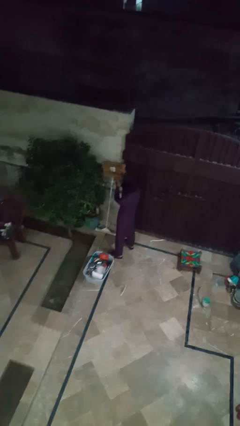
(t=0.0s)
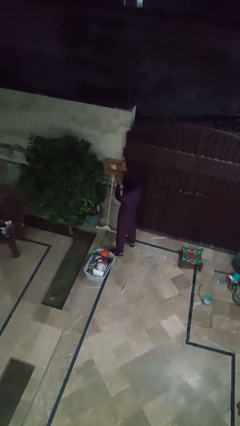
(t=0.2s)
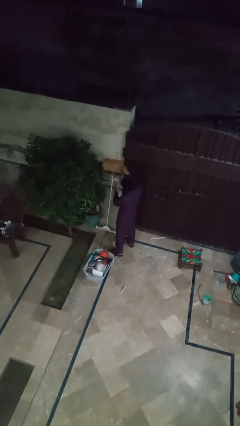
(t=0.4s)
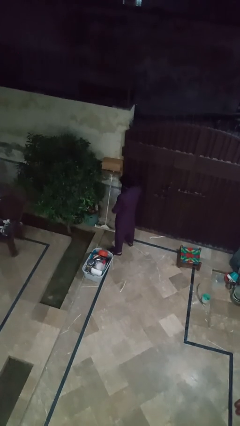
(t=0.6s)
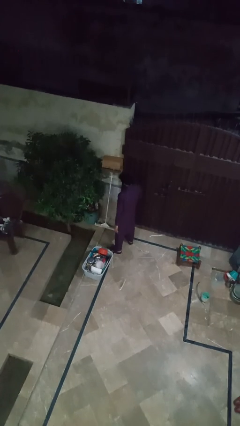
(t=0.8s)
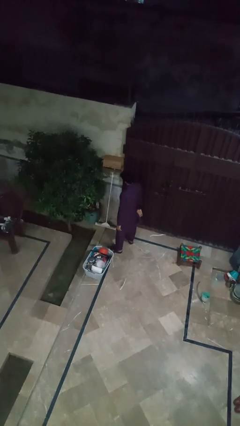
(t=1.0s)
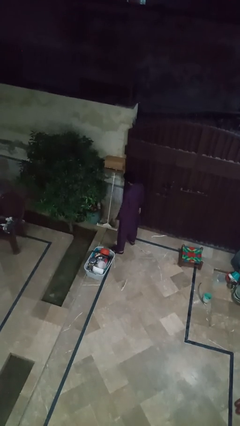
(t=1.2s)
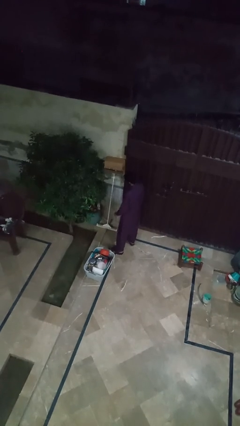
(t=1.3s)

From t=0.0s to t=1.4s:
person closes mailbox

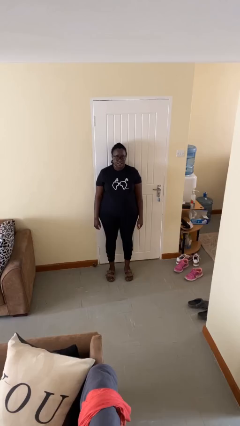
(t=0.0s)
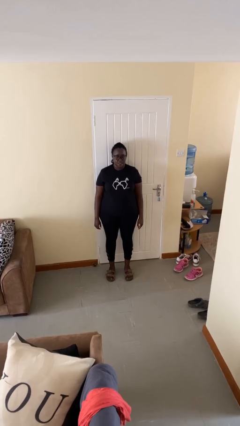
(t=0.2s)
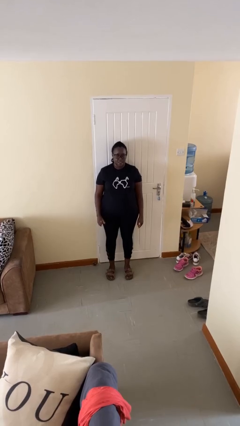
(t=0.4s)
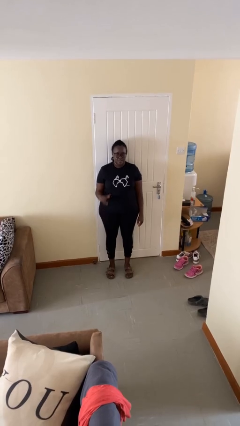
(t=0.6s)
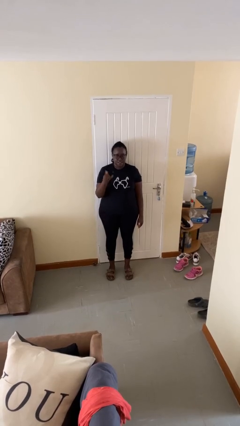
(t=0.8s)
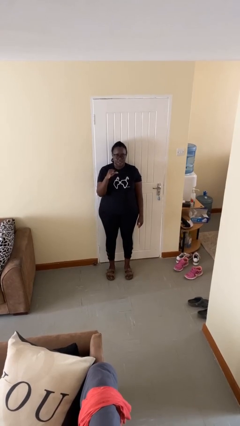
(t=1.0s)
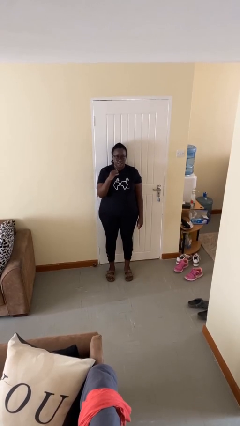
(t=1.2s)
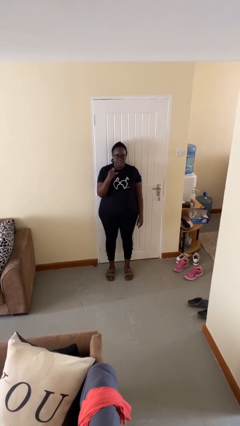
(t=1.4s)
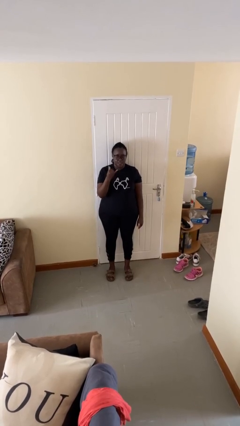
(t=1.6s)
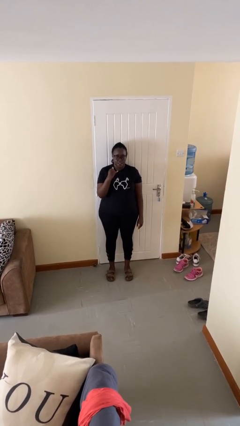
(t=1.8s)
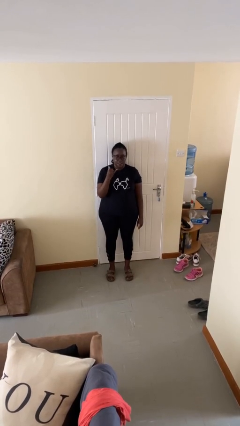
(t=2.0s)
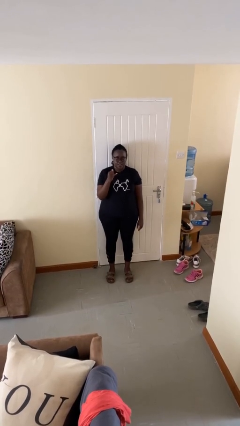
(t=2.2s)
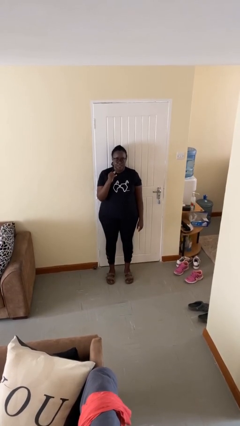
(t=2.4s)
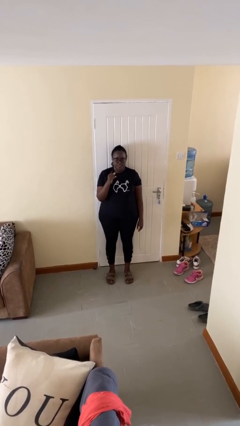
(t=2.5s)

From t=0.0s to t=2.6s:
person gestures hang loose

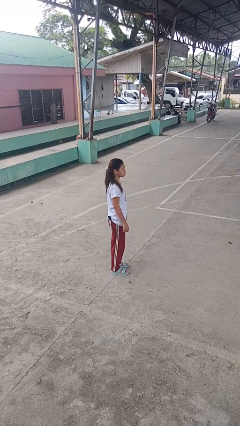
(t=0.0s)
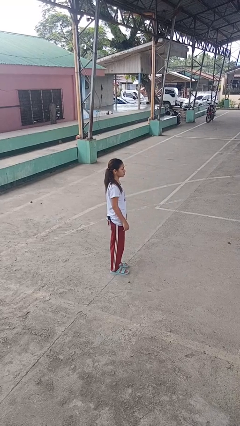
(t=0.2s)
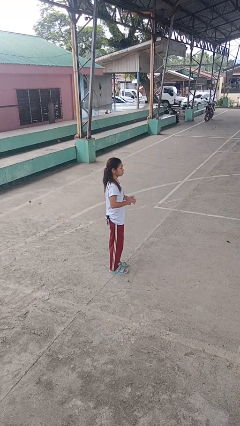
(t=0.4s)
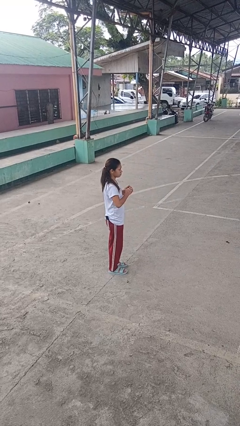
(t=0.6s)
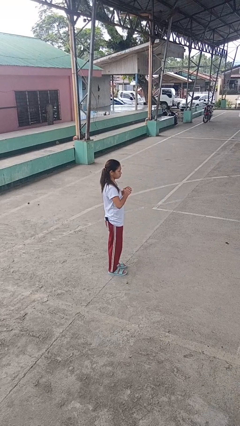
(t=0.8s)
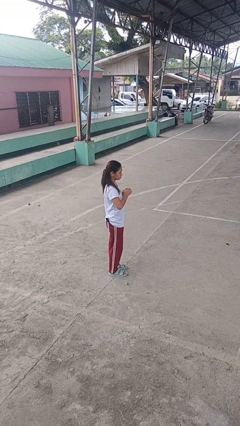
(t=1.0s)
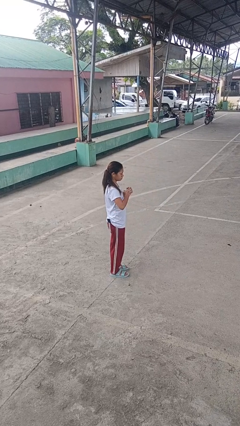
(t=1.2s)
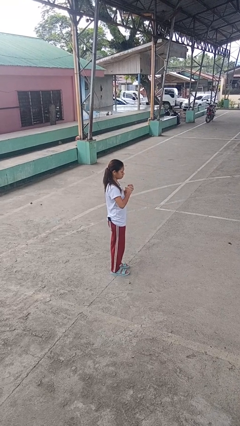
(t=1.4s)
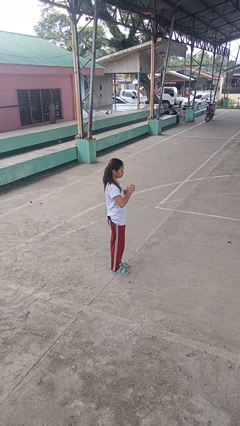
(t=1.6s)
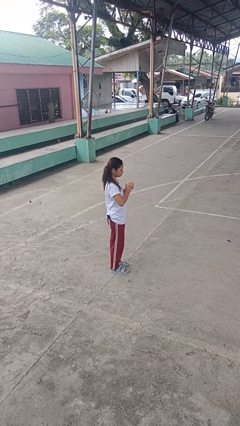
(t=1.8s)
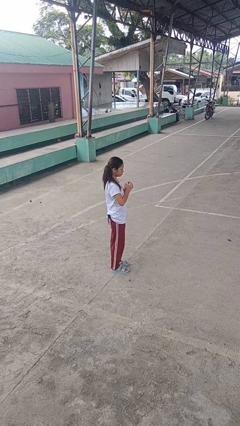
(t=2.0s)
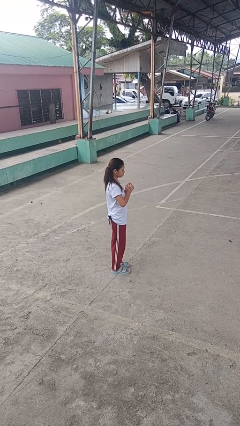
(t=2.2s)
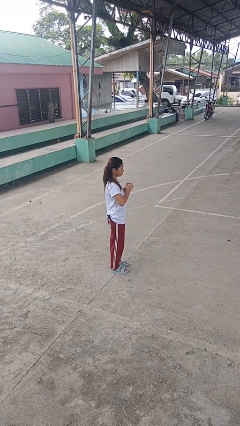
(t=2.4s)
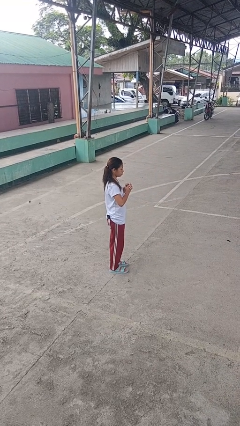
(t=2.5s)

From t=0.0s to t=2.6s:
person cracks knuckles

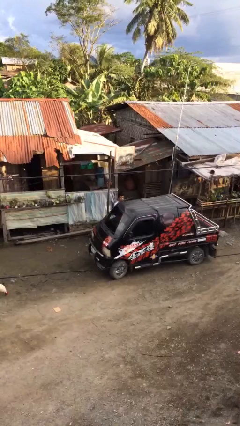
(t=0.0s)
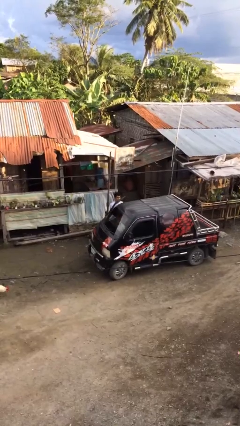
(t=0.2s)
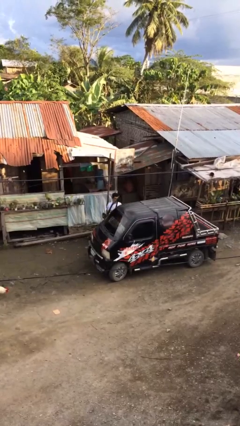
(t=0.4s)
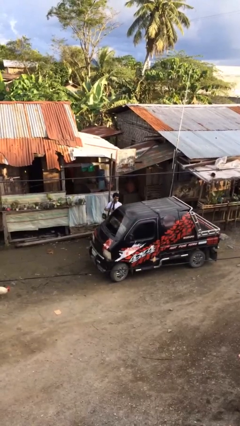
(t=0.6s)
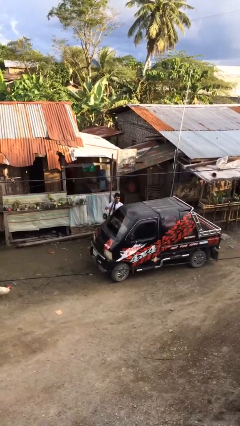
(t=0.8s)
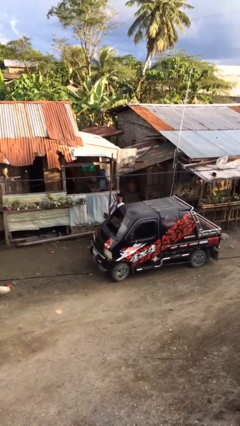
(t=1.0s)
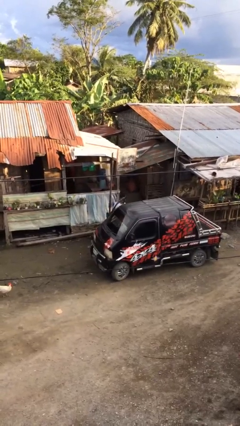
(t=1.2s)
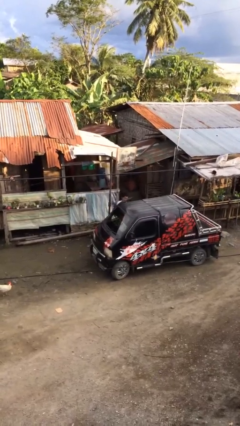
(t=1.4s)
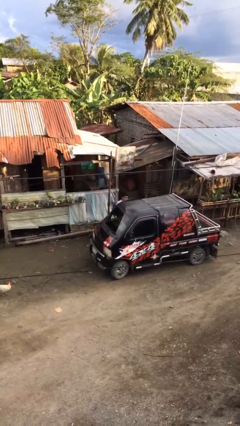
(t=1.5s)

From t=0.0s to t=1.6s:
person opens car door

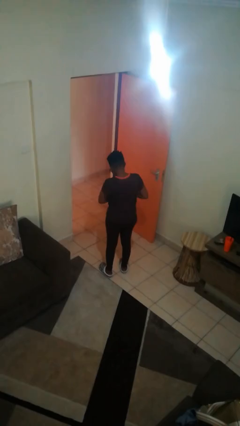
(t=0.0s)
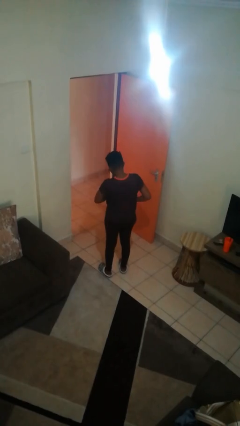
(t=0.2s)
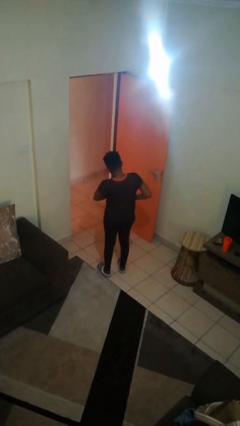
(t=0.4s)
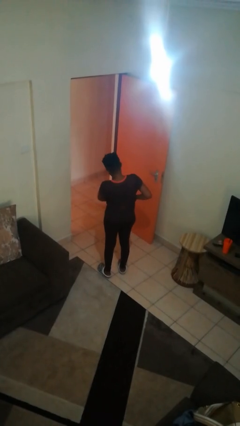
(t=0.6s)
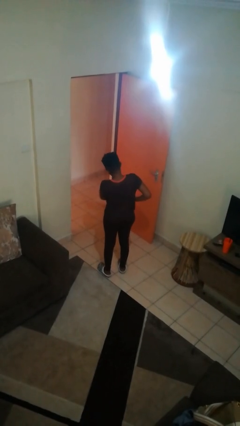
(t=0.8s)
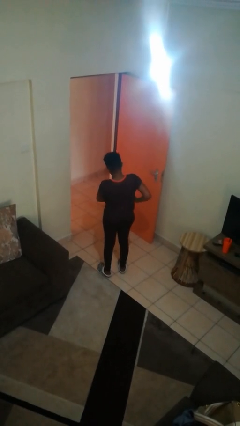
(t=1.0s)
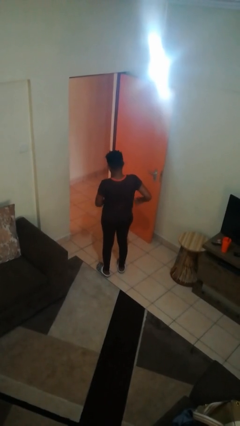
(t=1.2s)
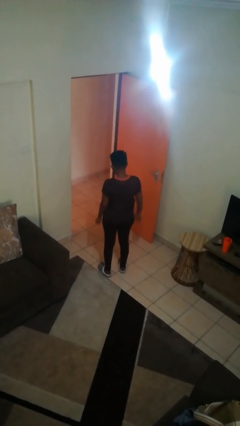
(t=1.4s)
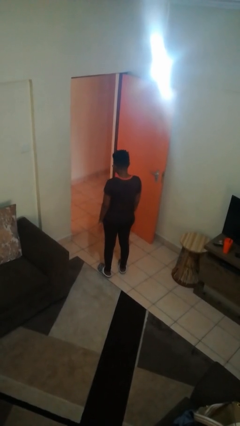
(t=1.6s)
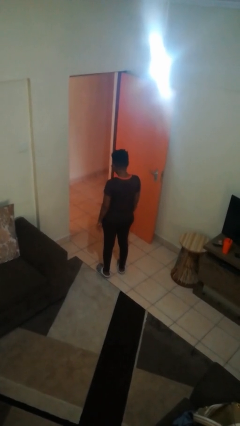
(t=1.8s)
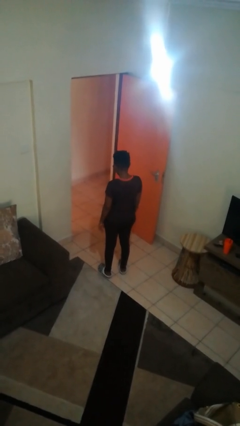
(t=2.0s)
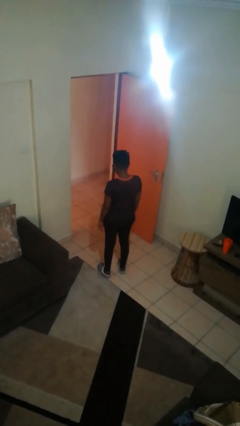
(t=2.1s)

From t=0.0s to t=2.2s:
person puts phone into pocket

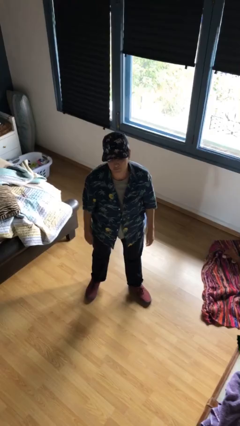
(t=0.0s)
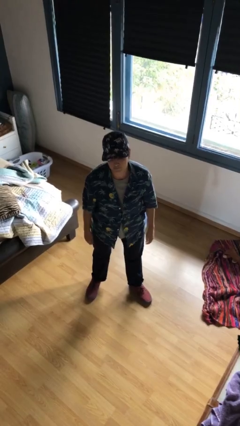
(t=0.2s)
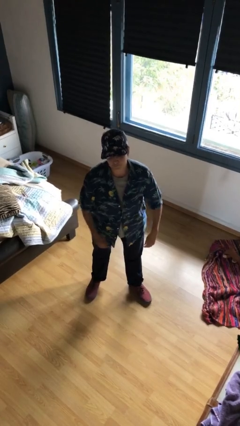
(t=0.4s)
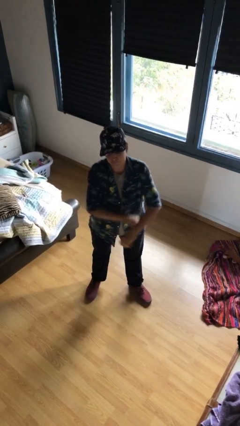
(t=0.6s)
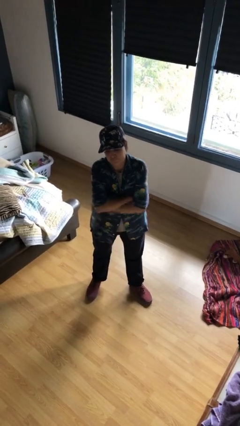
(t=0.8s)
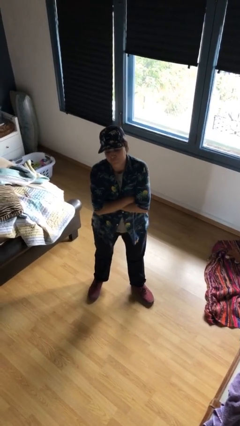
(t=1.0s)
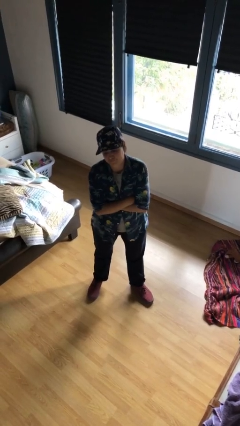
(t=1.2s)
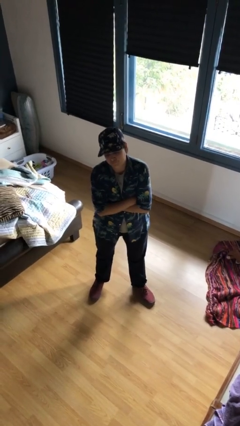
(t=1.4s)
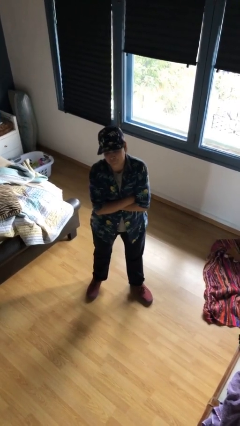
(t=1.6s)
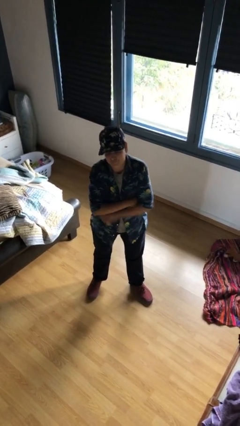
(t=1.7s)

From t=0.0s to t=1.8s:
person crosses arms

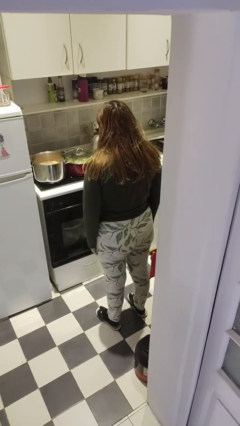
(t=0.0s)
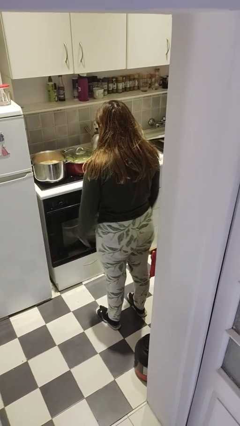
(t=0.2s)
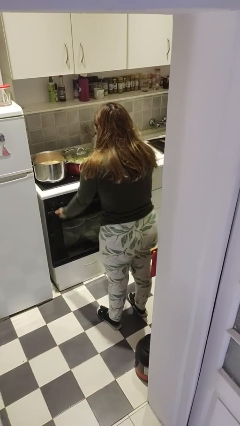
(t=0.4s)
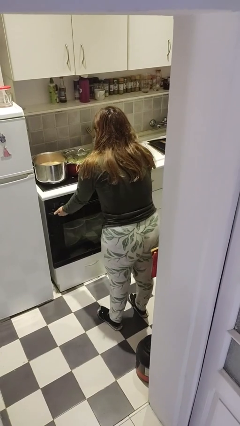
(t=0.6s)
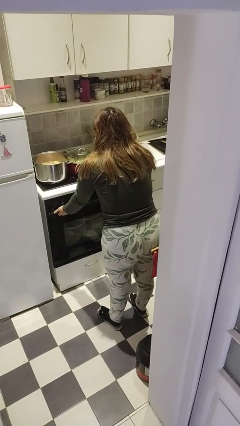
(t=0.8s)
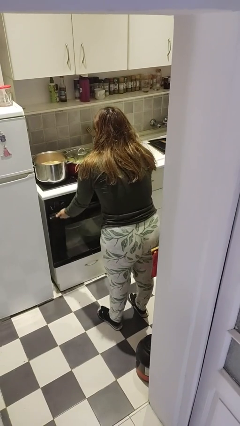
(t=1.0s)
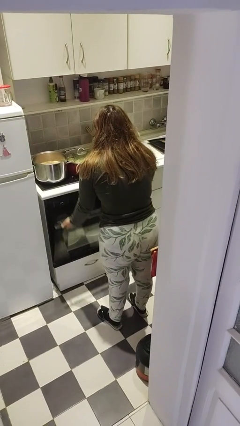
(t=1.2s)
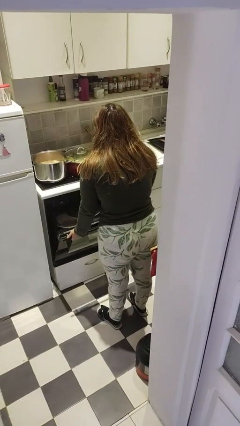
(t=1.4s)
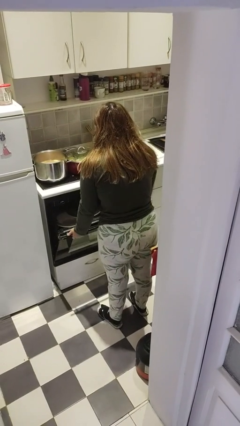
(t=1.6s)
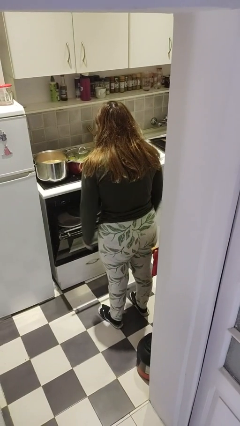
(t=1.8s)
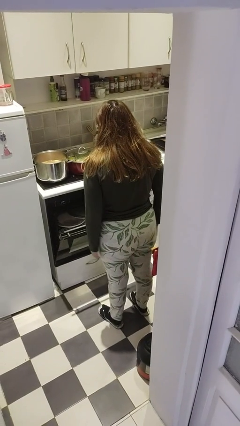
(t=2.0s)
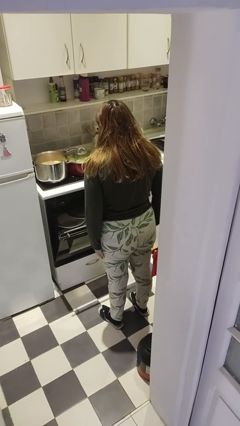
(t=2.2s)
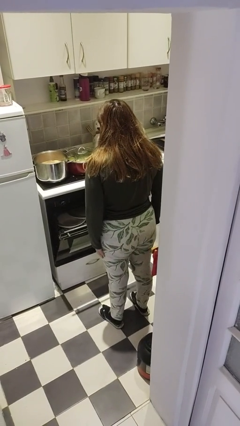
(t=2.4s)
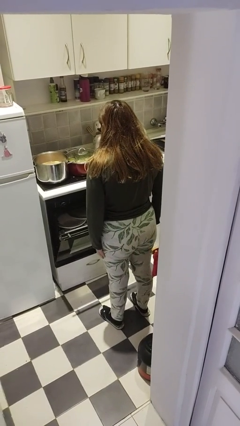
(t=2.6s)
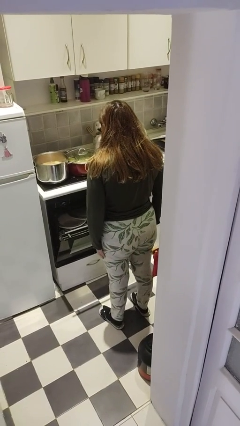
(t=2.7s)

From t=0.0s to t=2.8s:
person opens dishwasher

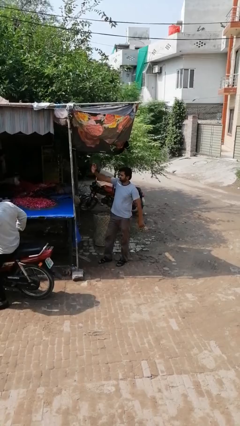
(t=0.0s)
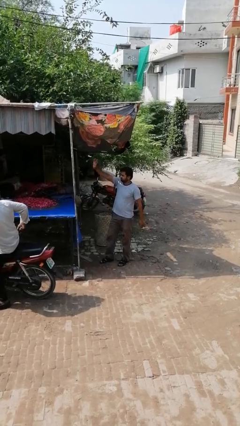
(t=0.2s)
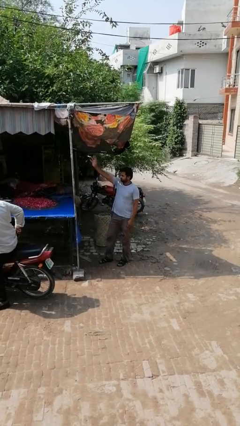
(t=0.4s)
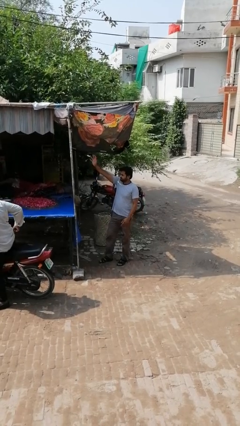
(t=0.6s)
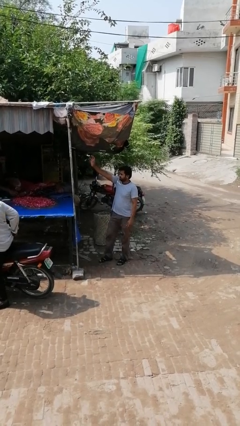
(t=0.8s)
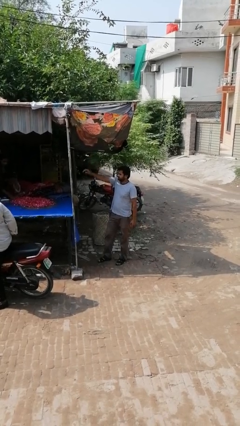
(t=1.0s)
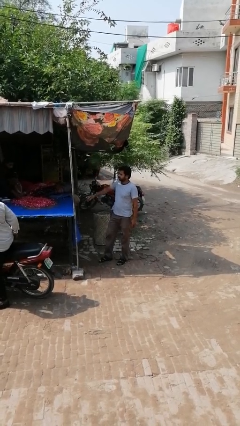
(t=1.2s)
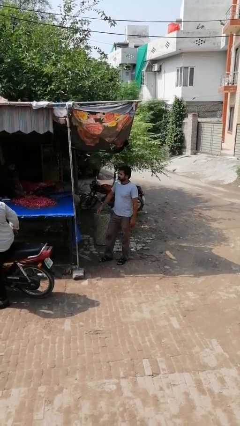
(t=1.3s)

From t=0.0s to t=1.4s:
person waves at person
